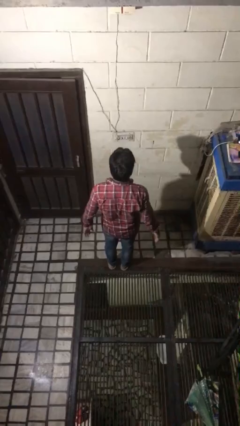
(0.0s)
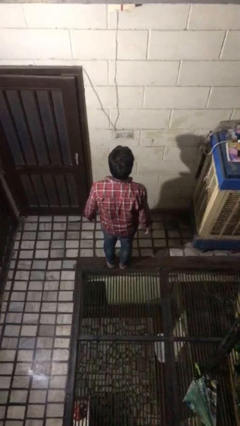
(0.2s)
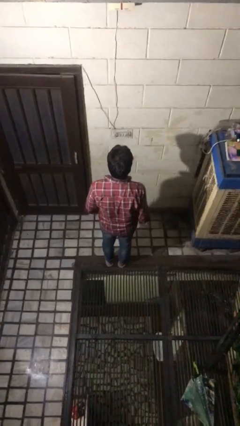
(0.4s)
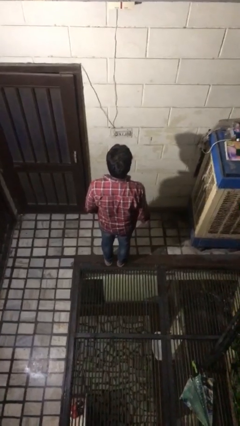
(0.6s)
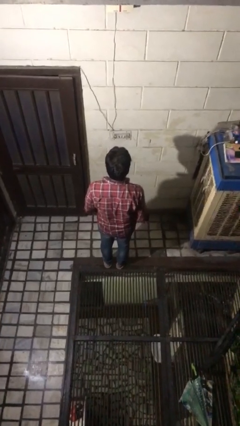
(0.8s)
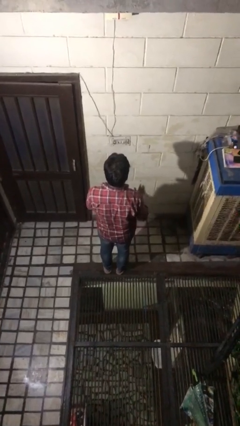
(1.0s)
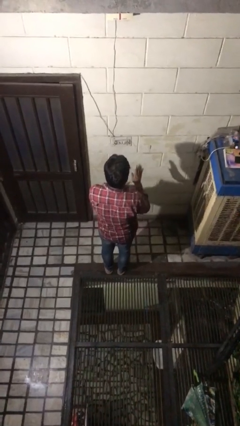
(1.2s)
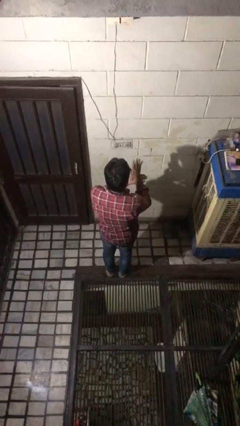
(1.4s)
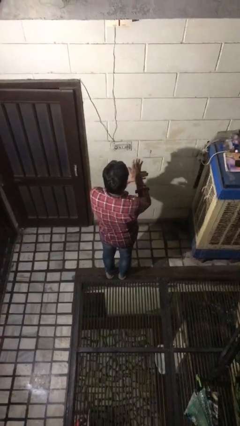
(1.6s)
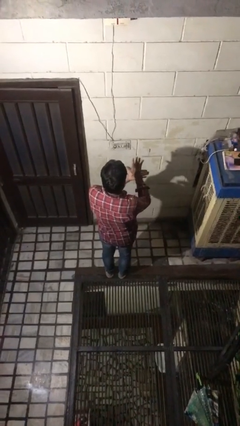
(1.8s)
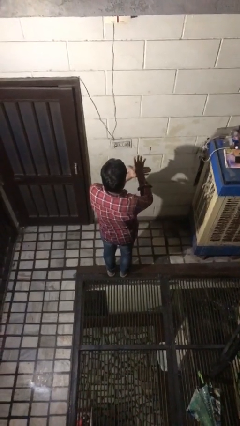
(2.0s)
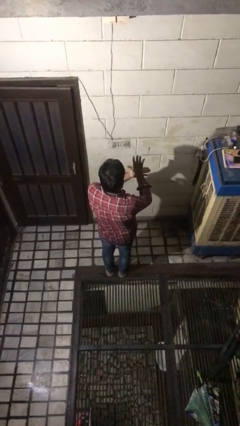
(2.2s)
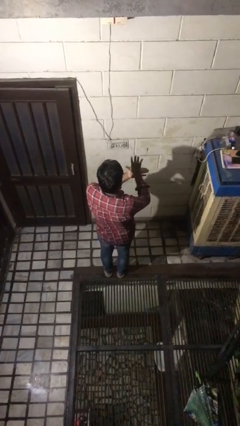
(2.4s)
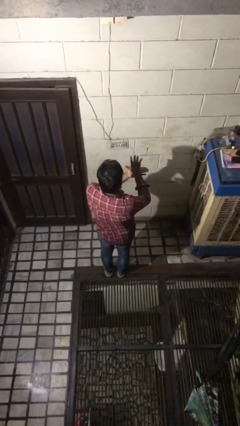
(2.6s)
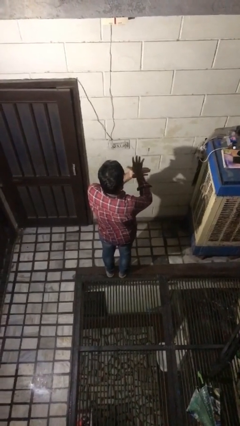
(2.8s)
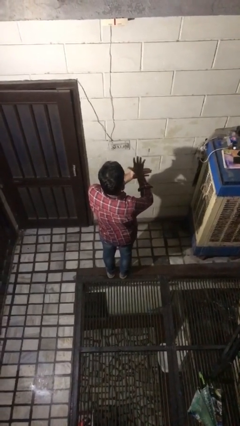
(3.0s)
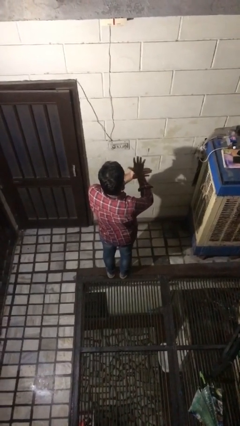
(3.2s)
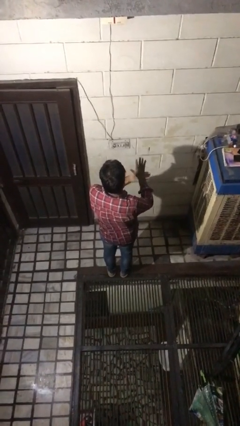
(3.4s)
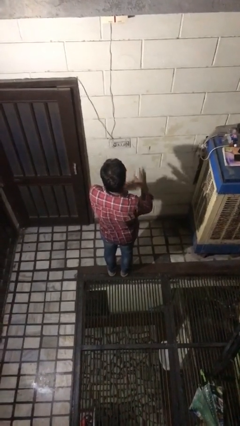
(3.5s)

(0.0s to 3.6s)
person gestures number five

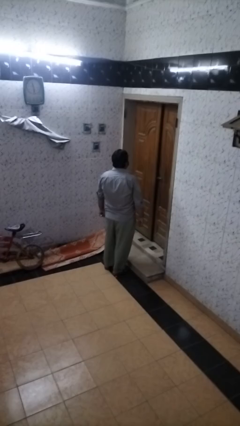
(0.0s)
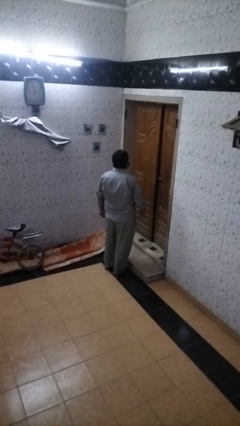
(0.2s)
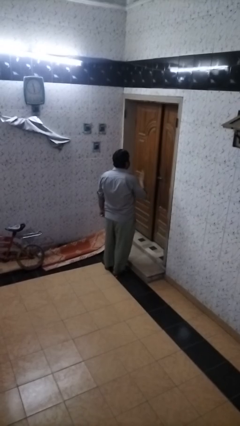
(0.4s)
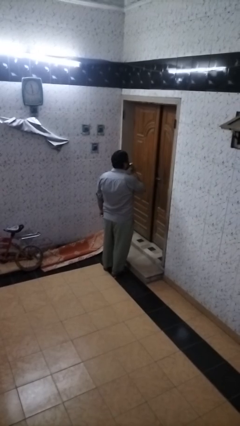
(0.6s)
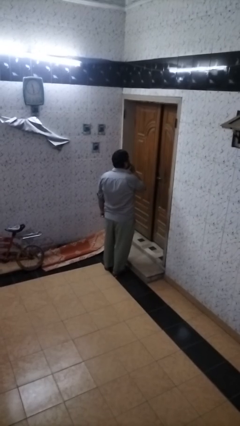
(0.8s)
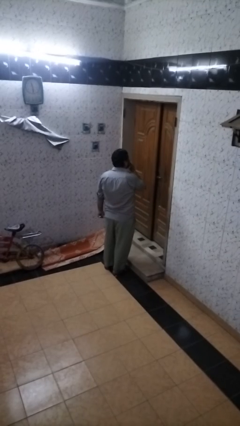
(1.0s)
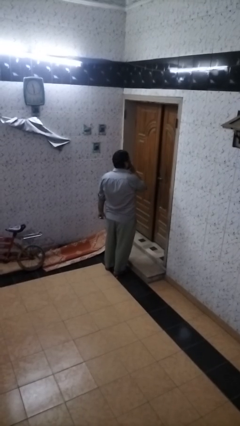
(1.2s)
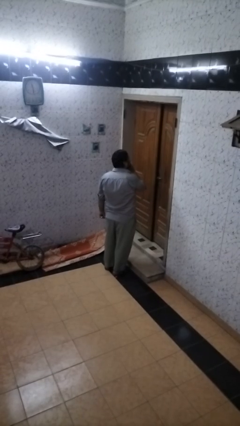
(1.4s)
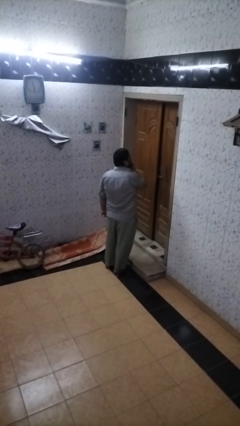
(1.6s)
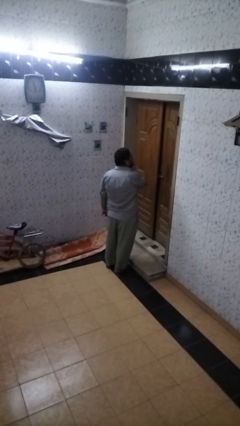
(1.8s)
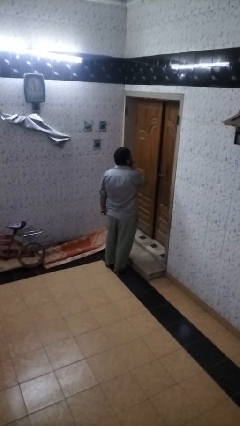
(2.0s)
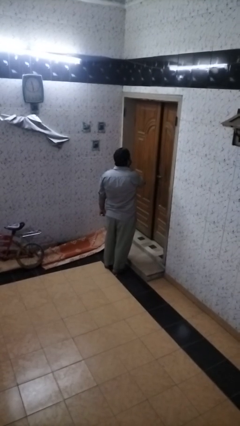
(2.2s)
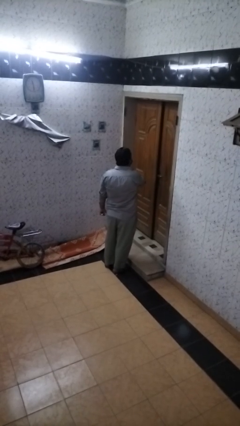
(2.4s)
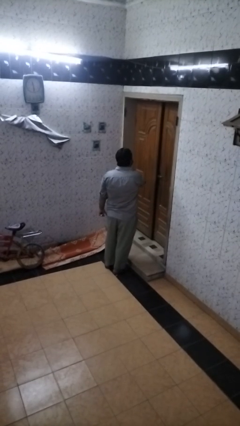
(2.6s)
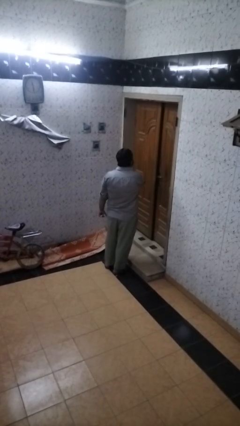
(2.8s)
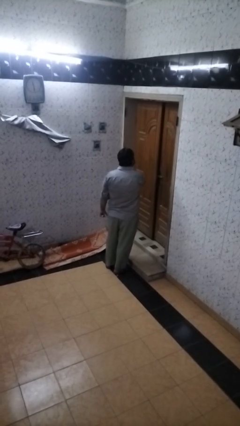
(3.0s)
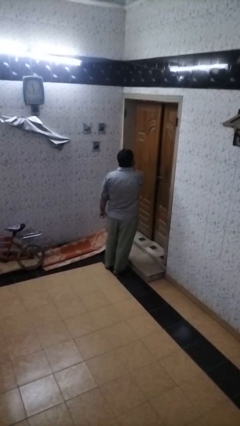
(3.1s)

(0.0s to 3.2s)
person brushes teeth

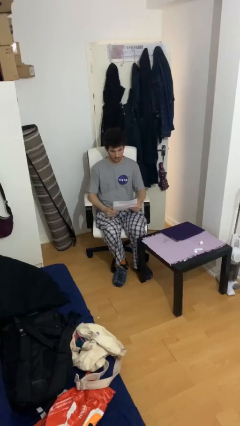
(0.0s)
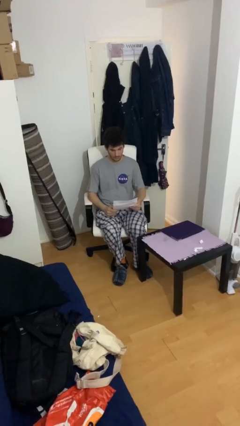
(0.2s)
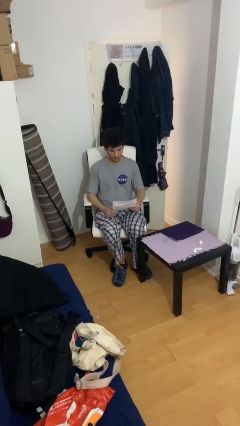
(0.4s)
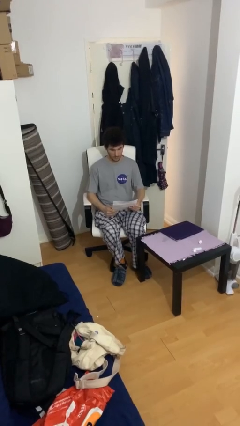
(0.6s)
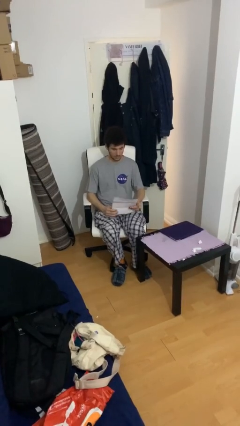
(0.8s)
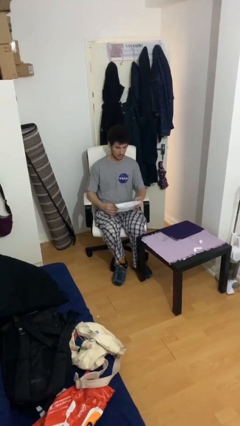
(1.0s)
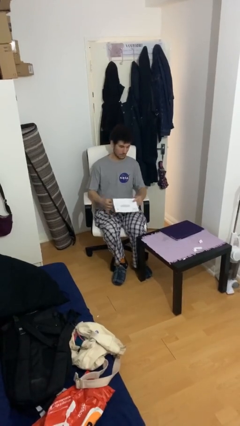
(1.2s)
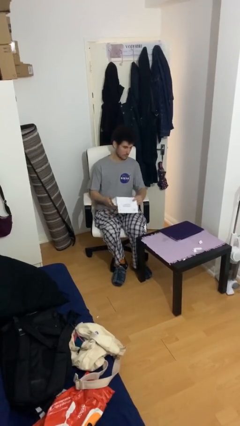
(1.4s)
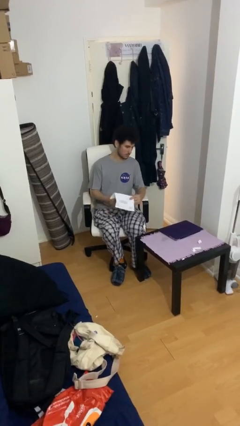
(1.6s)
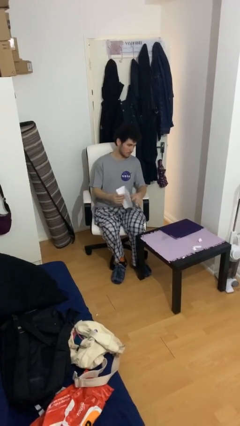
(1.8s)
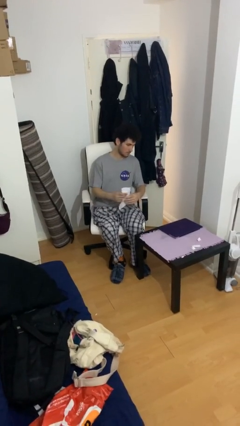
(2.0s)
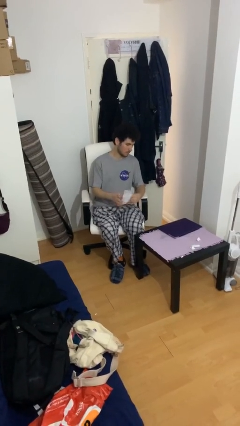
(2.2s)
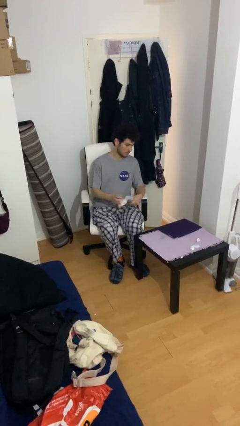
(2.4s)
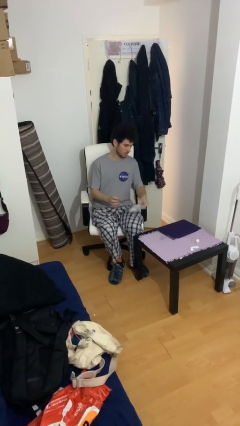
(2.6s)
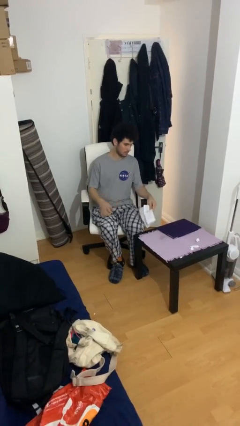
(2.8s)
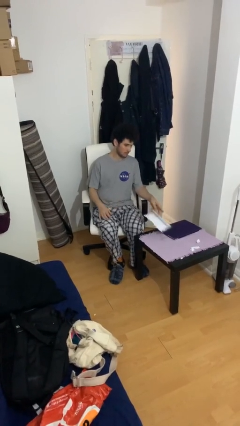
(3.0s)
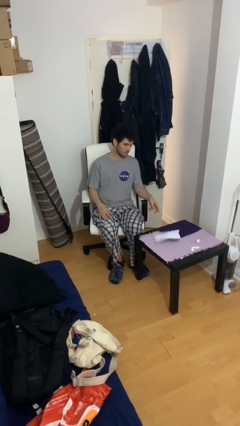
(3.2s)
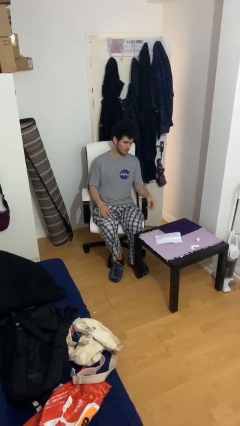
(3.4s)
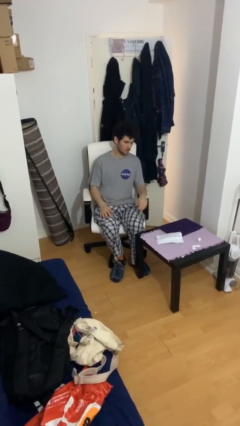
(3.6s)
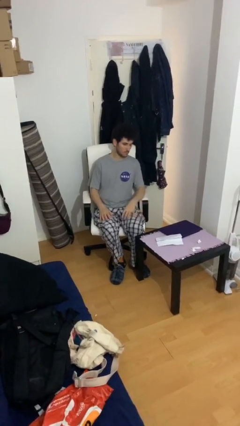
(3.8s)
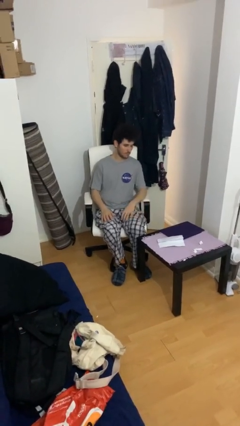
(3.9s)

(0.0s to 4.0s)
person puts down object on table

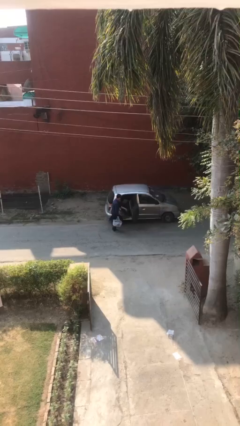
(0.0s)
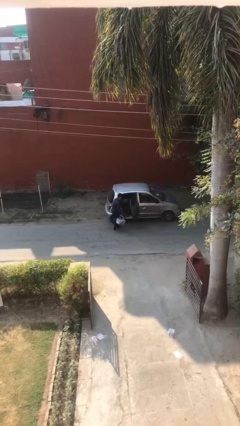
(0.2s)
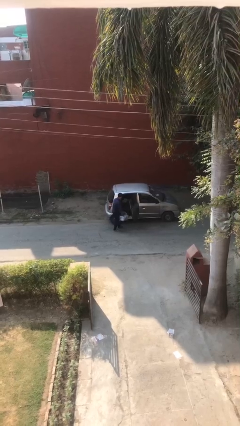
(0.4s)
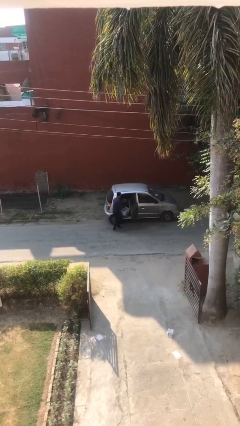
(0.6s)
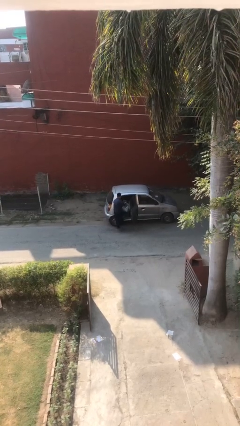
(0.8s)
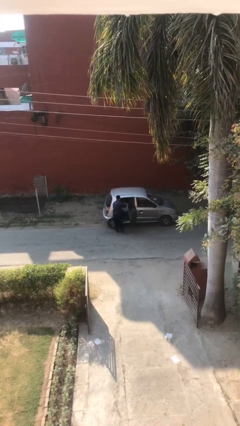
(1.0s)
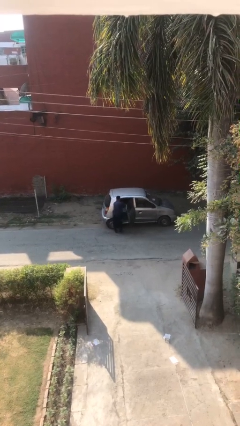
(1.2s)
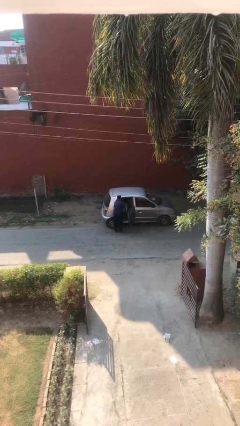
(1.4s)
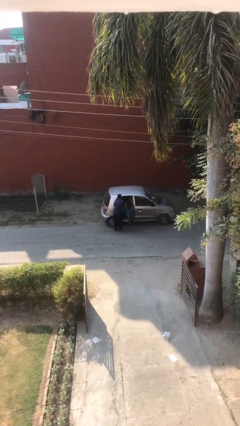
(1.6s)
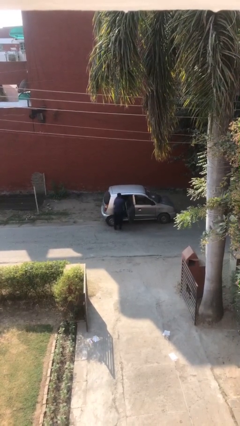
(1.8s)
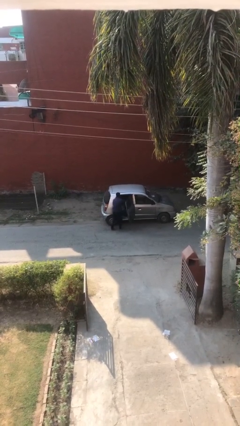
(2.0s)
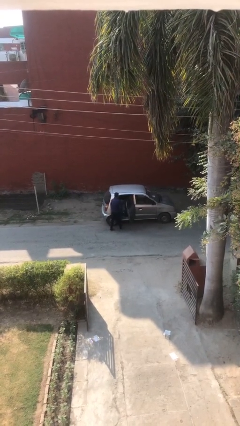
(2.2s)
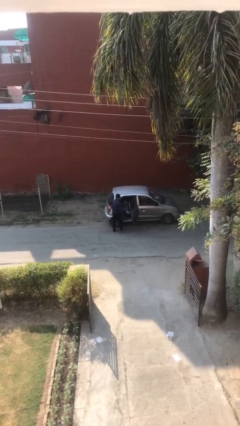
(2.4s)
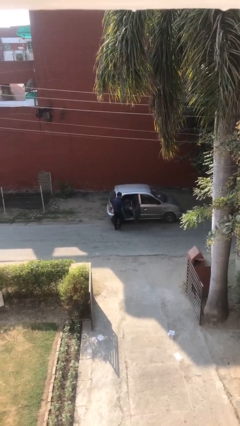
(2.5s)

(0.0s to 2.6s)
person loads car

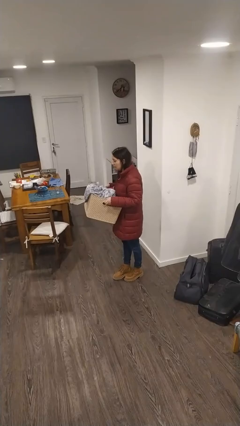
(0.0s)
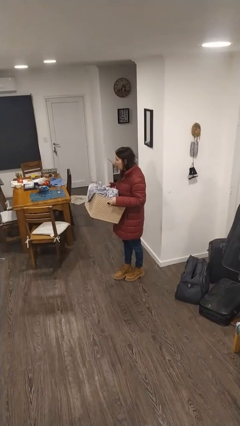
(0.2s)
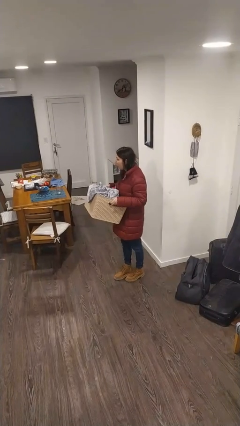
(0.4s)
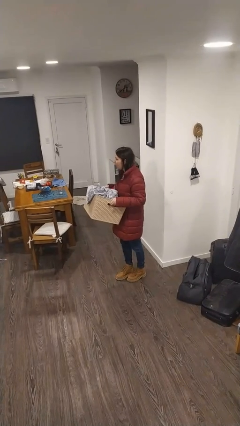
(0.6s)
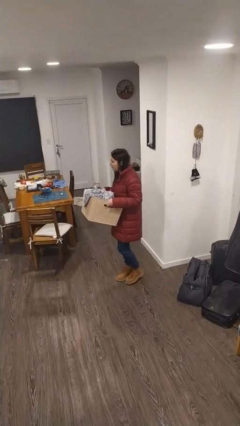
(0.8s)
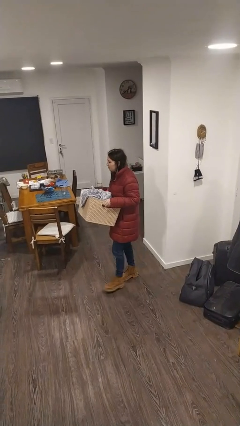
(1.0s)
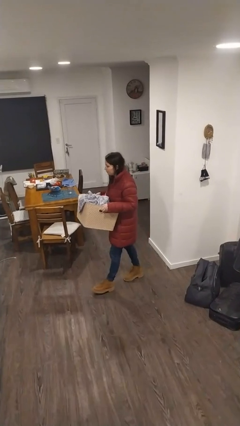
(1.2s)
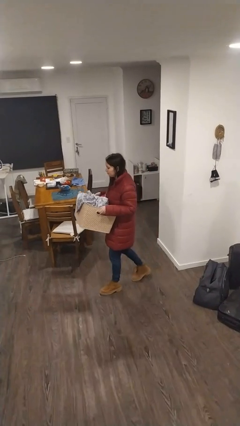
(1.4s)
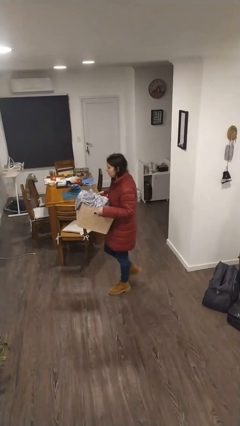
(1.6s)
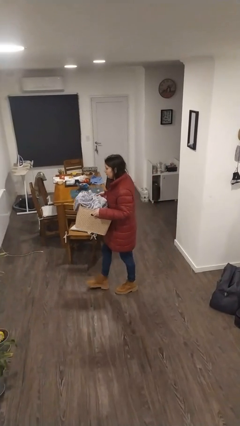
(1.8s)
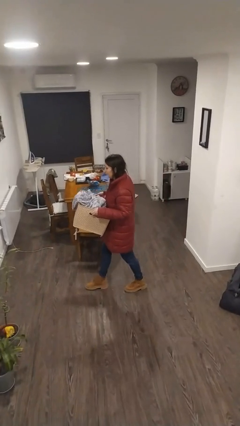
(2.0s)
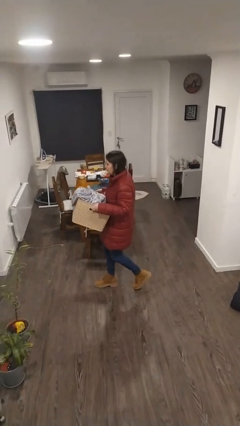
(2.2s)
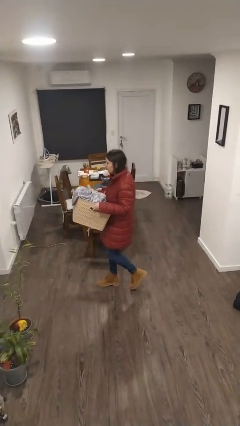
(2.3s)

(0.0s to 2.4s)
person carries laundry basket

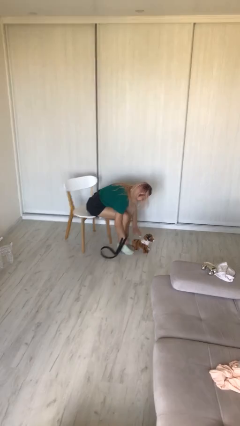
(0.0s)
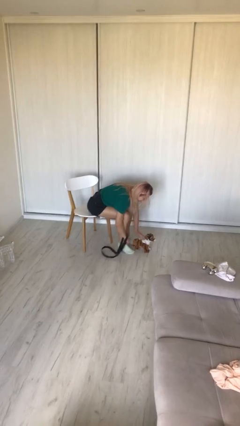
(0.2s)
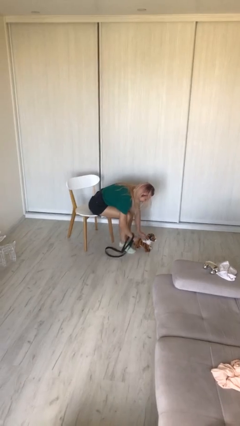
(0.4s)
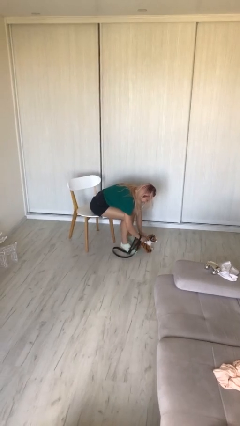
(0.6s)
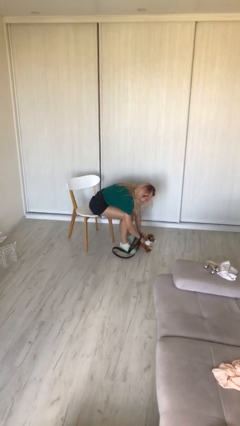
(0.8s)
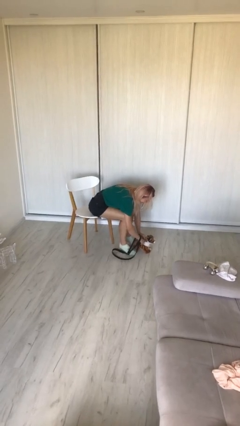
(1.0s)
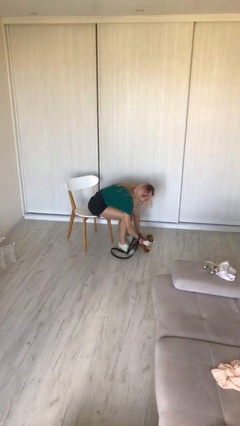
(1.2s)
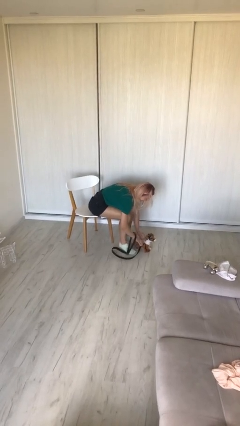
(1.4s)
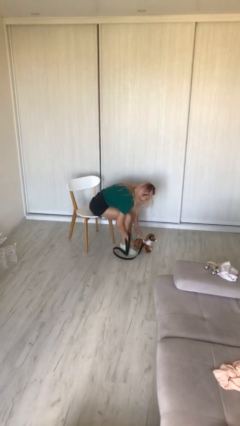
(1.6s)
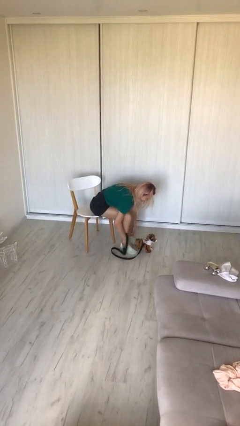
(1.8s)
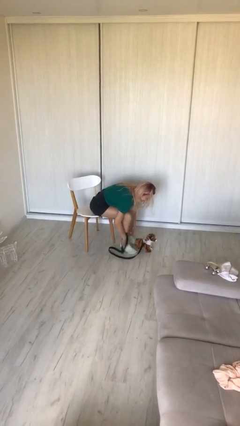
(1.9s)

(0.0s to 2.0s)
person attaches leash to dog
